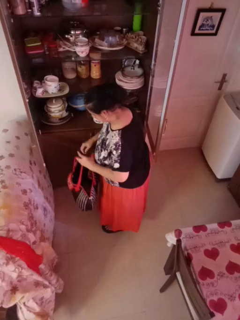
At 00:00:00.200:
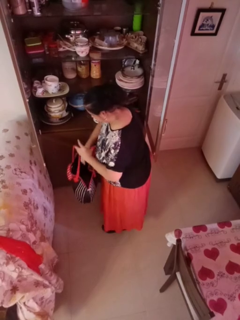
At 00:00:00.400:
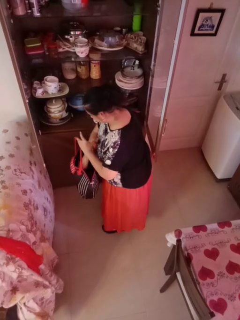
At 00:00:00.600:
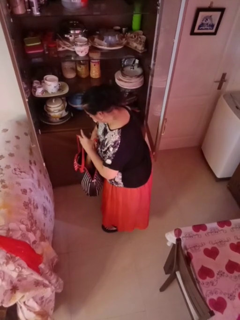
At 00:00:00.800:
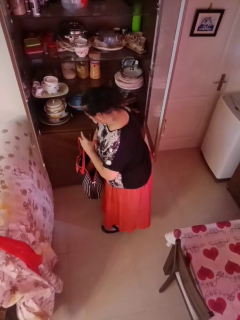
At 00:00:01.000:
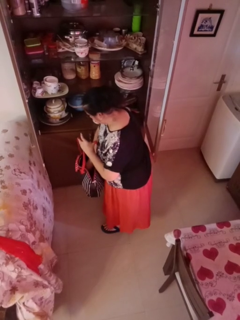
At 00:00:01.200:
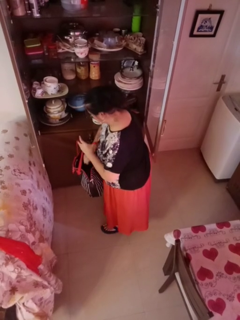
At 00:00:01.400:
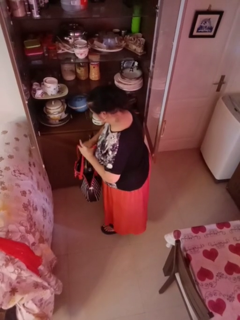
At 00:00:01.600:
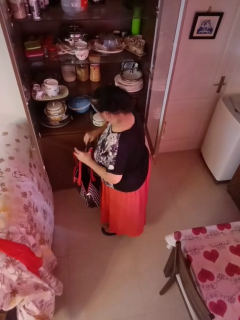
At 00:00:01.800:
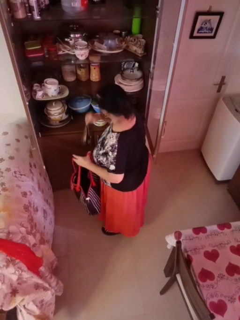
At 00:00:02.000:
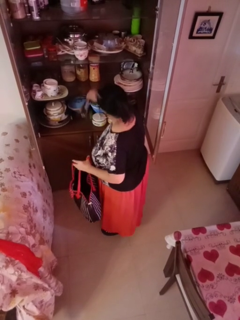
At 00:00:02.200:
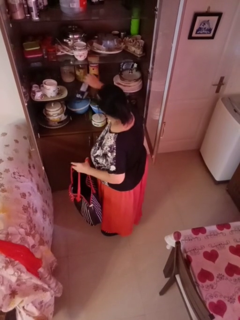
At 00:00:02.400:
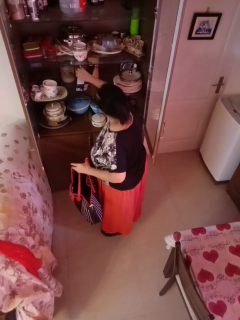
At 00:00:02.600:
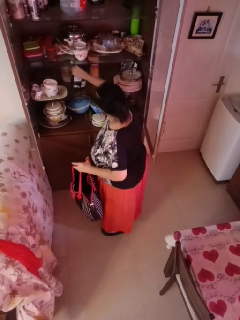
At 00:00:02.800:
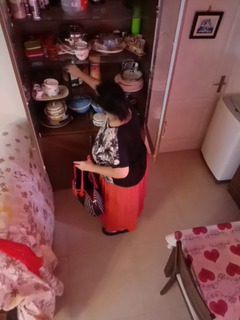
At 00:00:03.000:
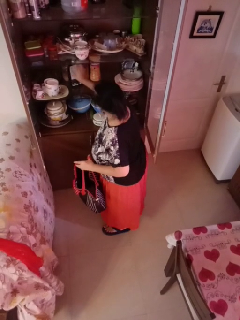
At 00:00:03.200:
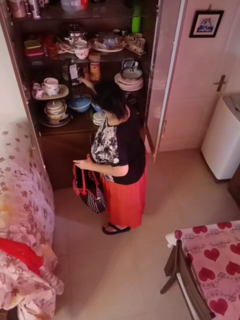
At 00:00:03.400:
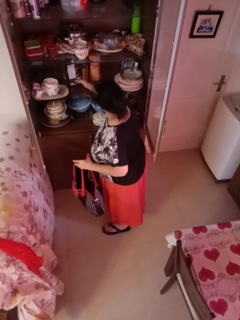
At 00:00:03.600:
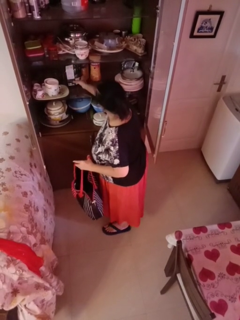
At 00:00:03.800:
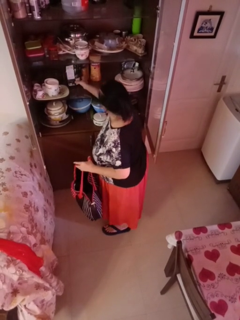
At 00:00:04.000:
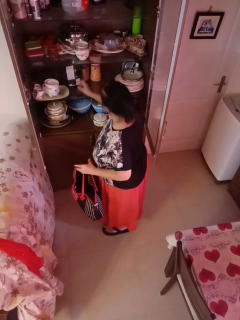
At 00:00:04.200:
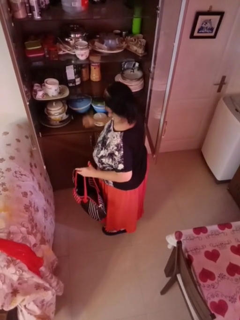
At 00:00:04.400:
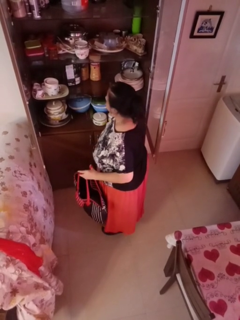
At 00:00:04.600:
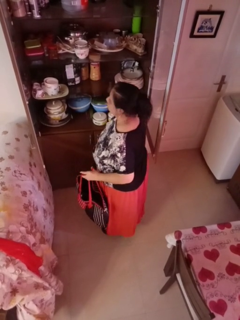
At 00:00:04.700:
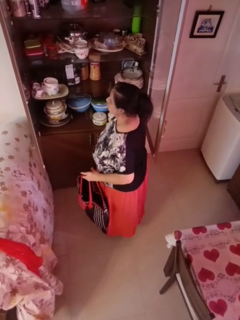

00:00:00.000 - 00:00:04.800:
person loads groceries into cabinet

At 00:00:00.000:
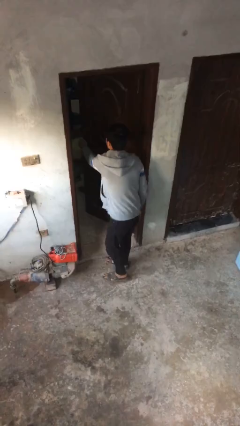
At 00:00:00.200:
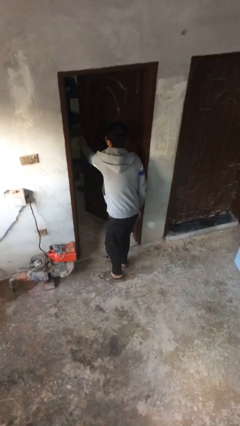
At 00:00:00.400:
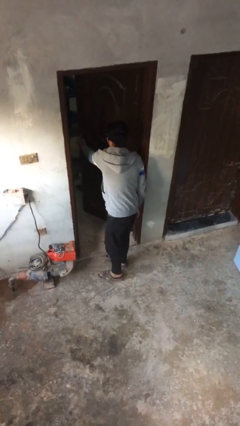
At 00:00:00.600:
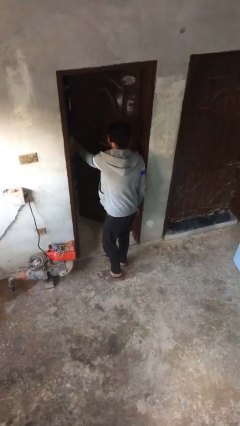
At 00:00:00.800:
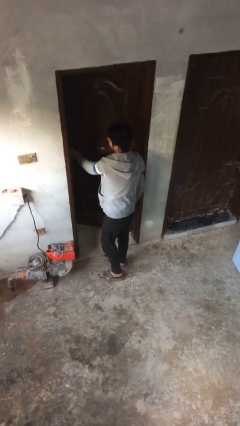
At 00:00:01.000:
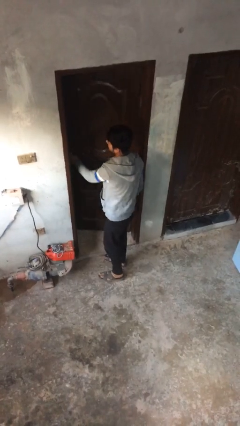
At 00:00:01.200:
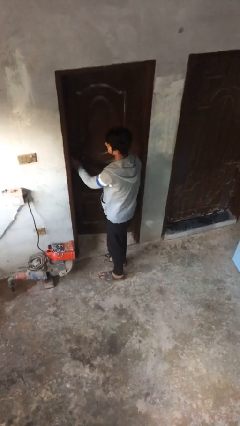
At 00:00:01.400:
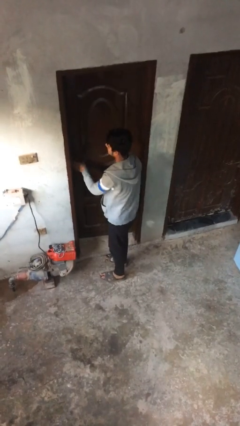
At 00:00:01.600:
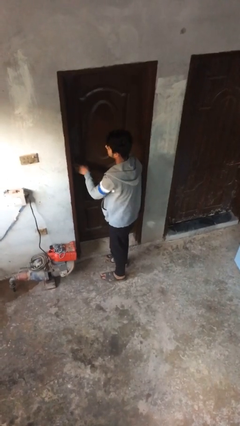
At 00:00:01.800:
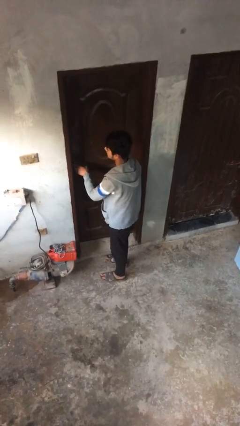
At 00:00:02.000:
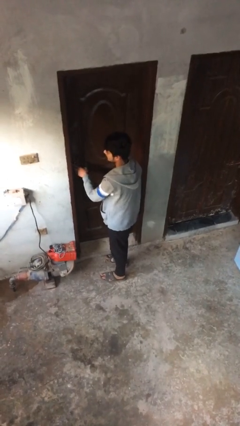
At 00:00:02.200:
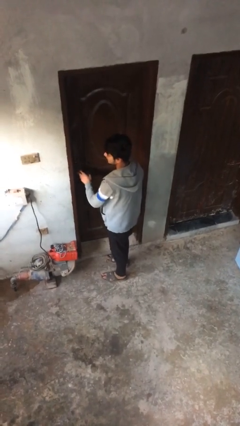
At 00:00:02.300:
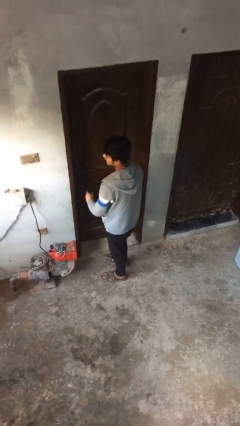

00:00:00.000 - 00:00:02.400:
person closes facility door

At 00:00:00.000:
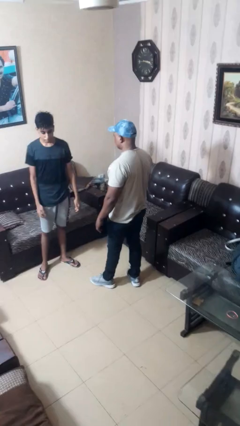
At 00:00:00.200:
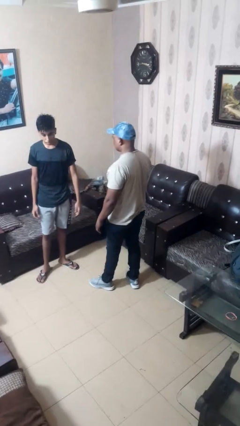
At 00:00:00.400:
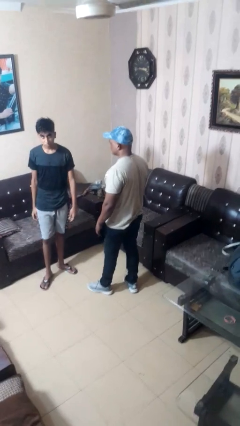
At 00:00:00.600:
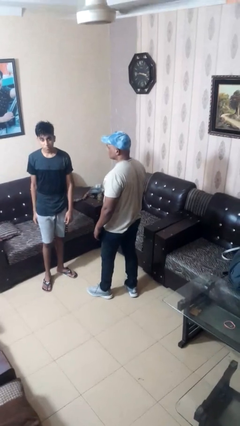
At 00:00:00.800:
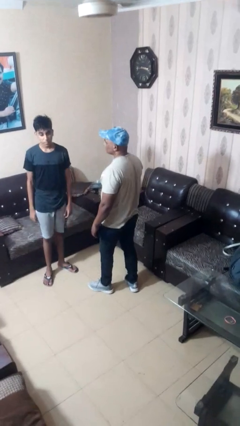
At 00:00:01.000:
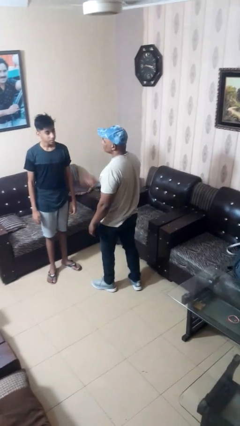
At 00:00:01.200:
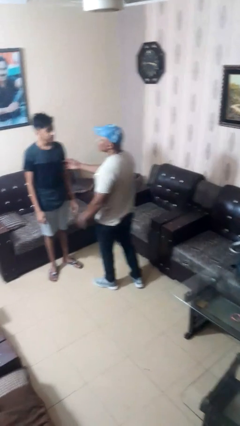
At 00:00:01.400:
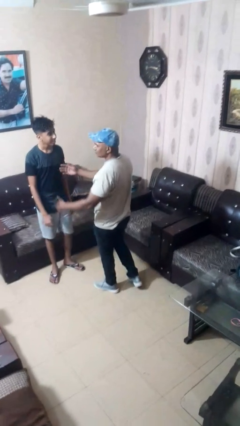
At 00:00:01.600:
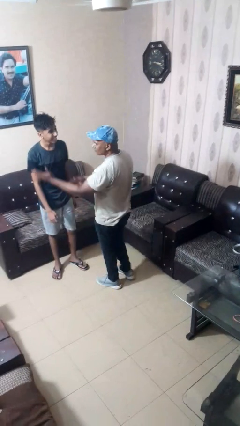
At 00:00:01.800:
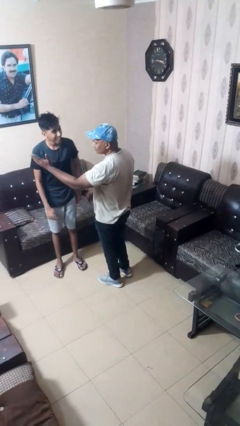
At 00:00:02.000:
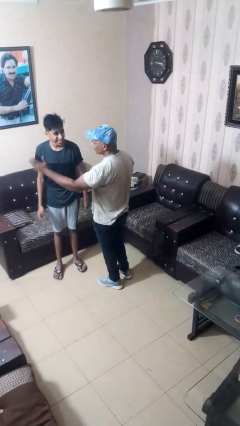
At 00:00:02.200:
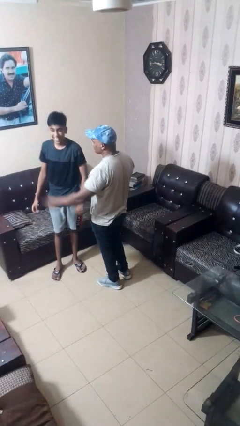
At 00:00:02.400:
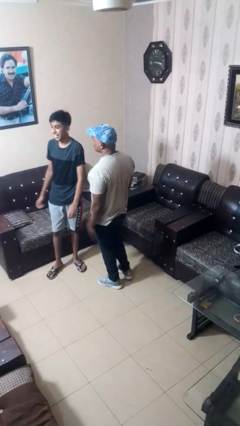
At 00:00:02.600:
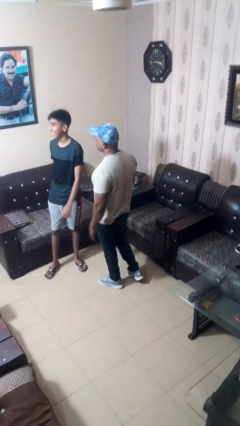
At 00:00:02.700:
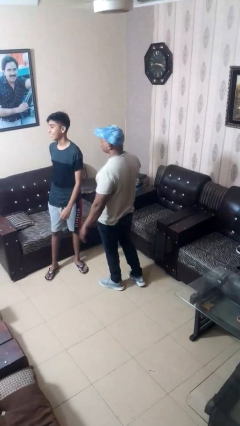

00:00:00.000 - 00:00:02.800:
person shoves person

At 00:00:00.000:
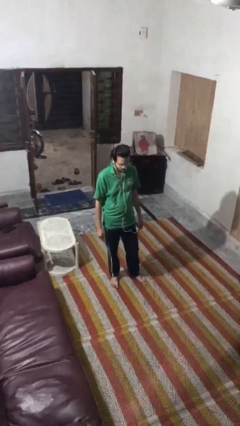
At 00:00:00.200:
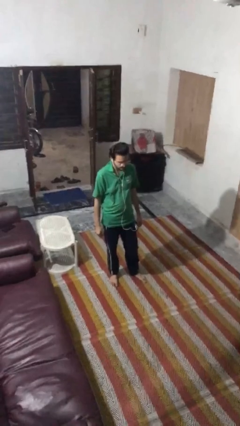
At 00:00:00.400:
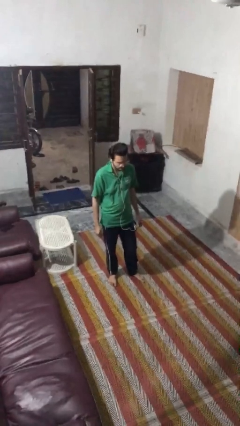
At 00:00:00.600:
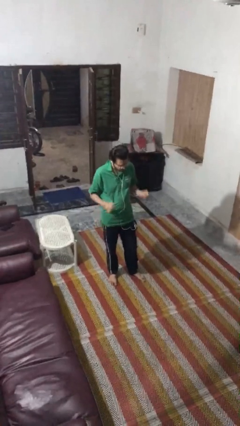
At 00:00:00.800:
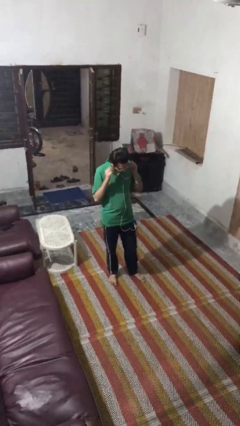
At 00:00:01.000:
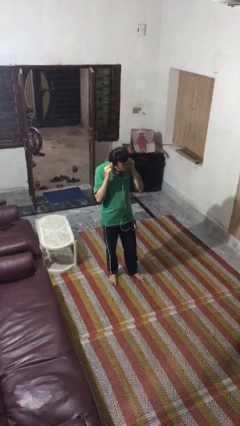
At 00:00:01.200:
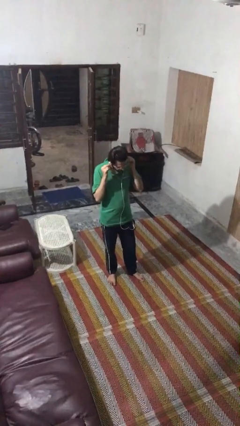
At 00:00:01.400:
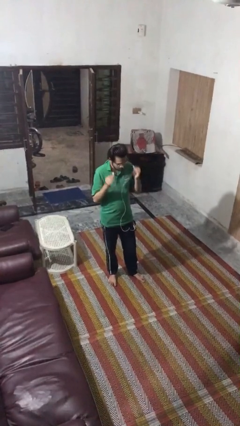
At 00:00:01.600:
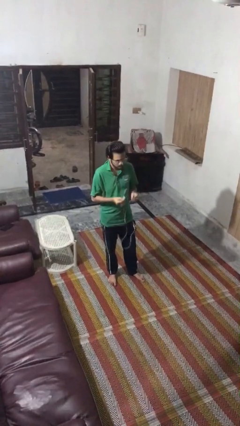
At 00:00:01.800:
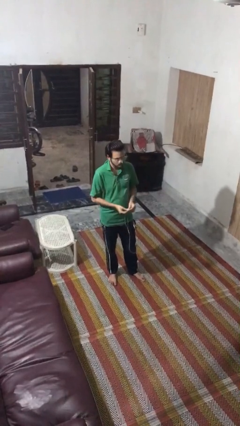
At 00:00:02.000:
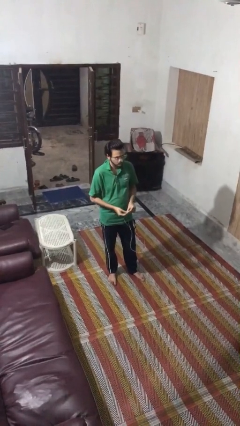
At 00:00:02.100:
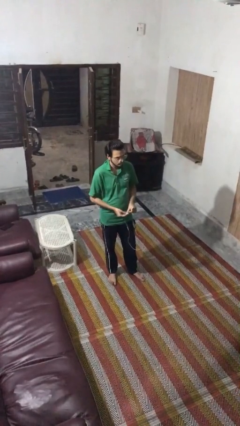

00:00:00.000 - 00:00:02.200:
person takes off headphones

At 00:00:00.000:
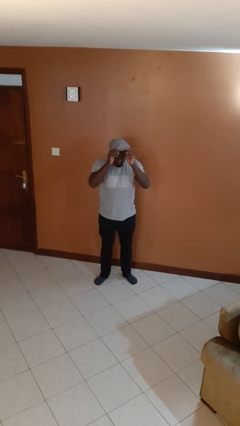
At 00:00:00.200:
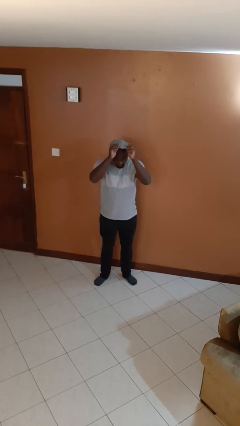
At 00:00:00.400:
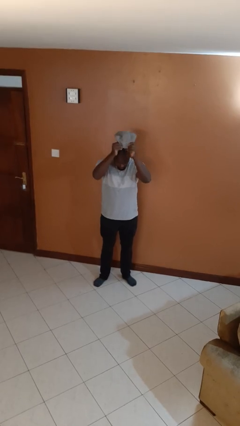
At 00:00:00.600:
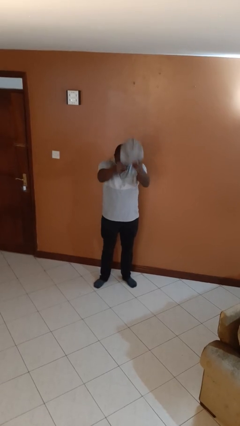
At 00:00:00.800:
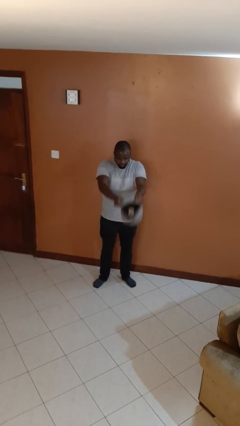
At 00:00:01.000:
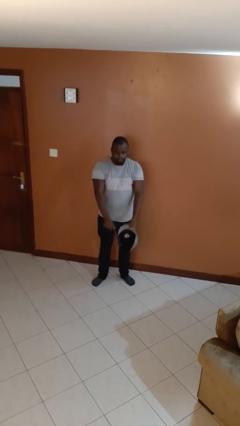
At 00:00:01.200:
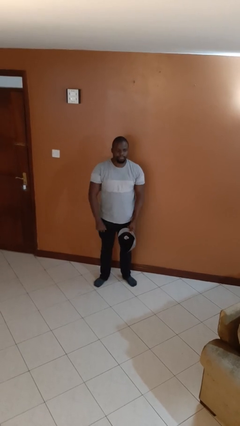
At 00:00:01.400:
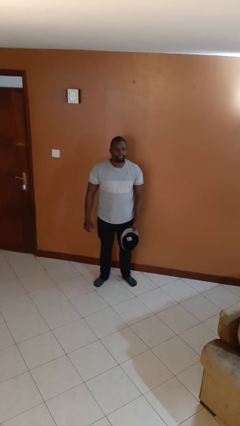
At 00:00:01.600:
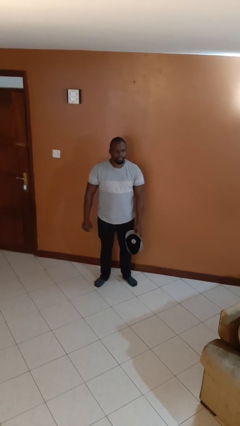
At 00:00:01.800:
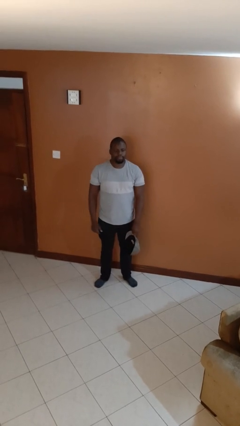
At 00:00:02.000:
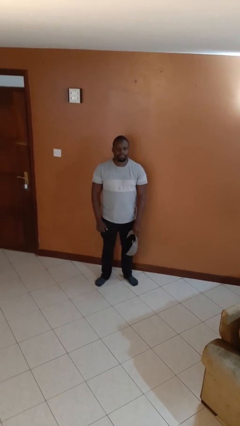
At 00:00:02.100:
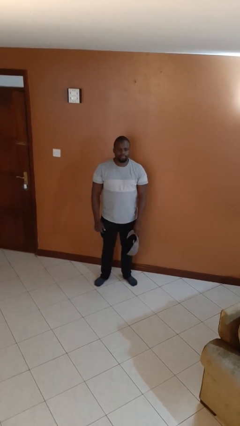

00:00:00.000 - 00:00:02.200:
person takes off hat

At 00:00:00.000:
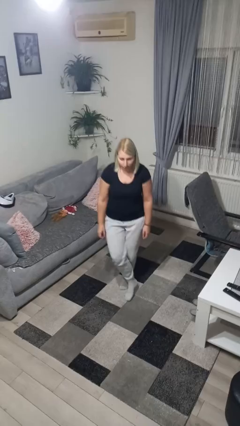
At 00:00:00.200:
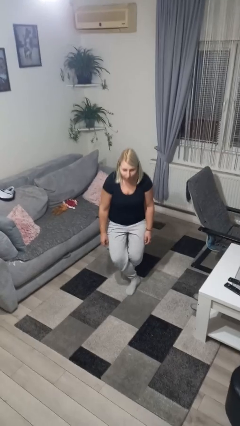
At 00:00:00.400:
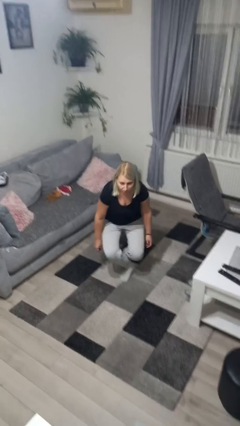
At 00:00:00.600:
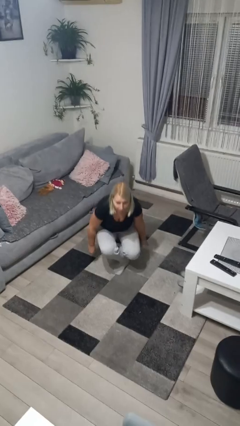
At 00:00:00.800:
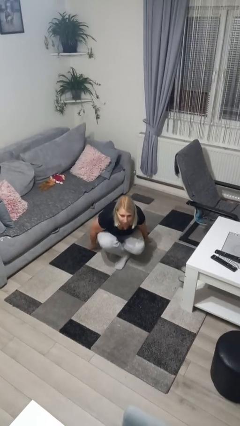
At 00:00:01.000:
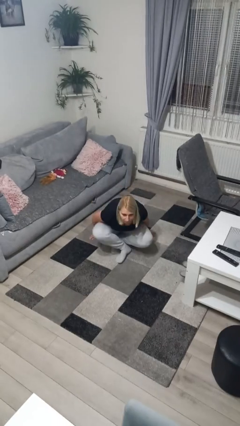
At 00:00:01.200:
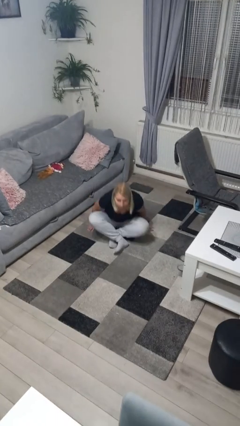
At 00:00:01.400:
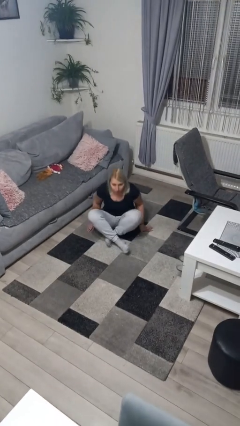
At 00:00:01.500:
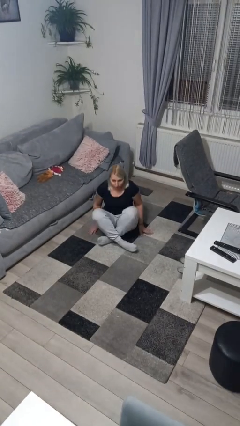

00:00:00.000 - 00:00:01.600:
person sits crisscross

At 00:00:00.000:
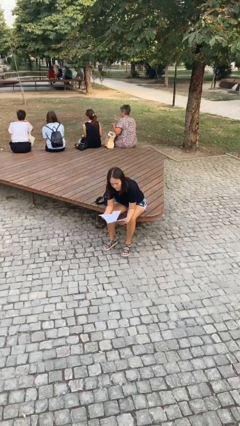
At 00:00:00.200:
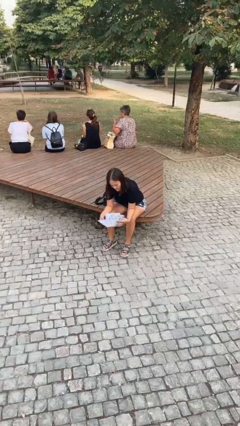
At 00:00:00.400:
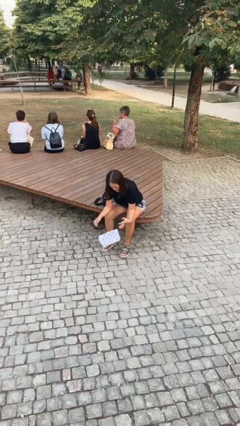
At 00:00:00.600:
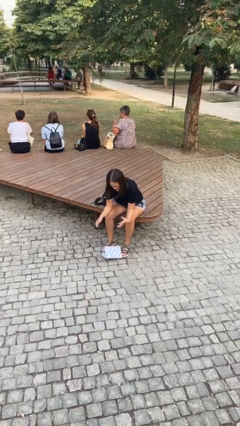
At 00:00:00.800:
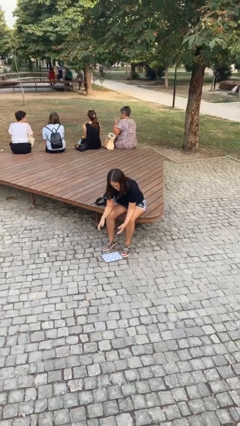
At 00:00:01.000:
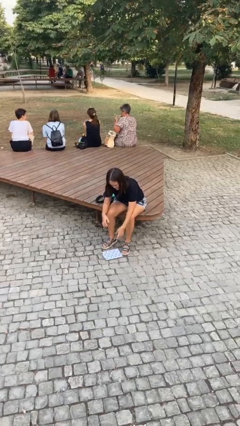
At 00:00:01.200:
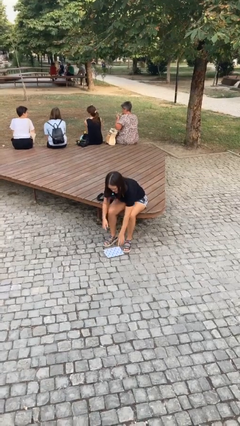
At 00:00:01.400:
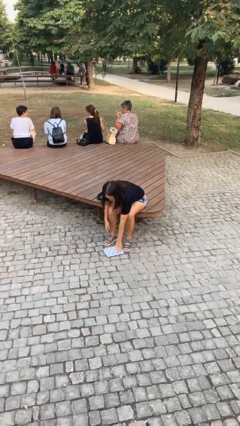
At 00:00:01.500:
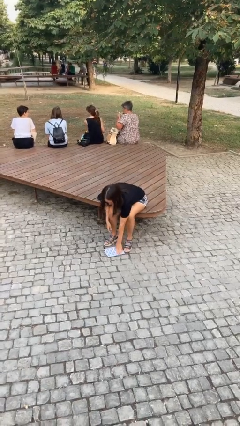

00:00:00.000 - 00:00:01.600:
person drops object
